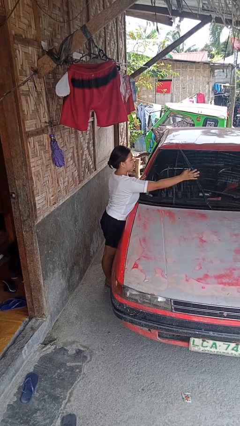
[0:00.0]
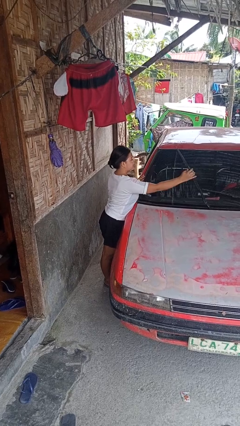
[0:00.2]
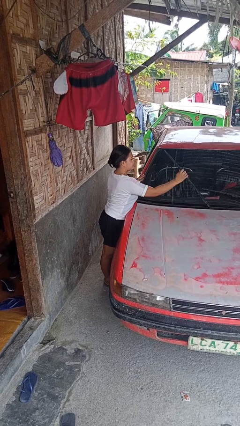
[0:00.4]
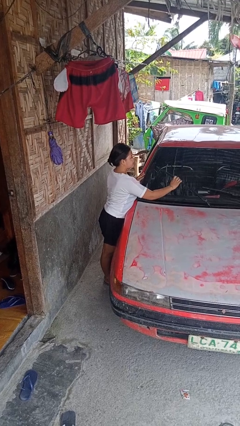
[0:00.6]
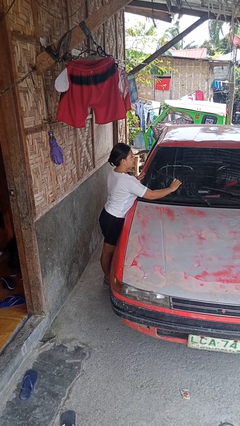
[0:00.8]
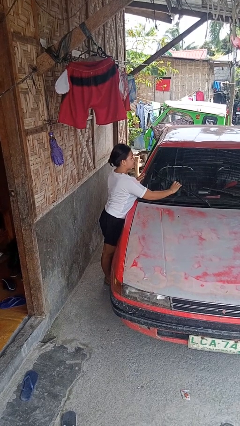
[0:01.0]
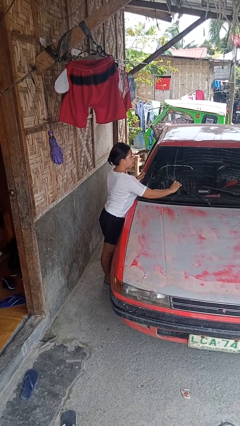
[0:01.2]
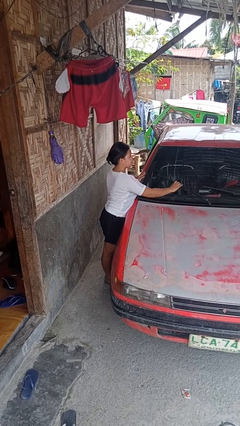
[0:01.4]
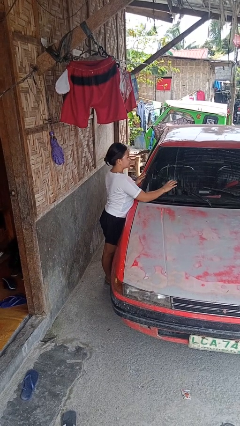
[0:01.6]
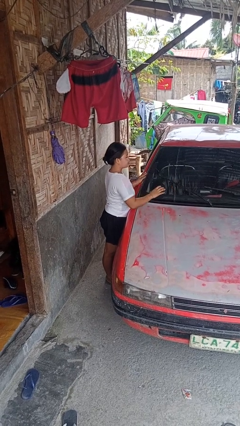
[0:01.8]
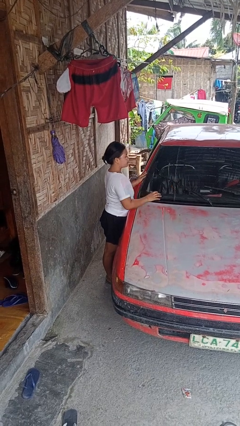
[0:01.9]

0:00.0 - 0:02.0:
person flips down car wipers

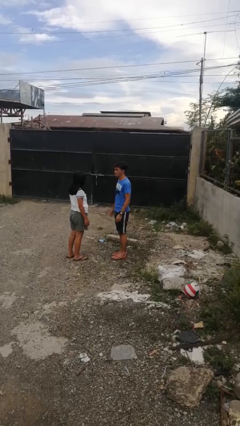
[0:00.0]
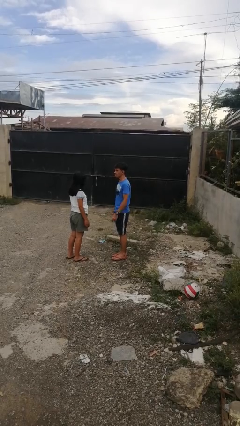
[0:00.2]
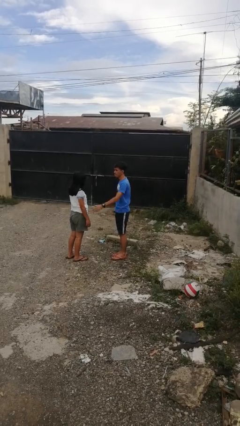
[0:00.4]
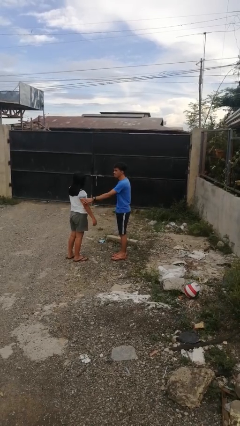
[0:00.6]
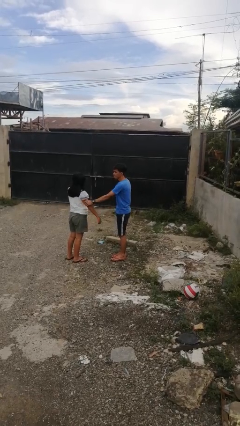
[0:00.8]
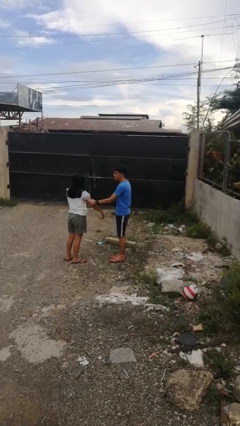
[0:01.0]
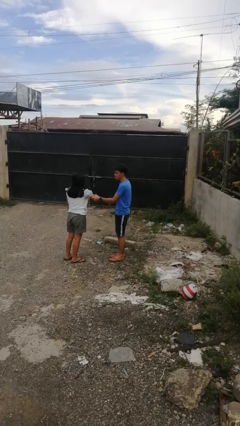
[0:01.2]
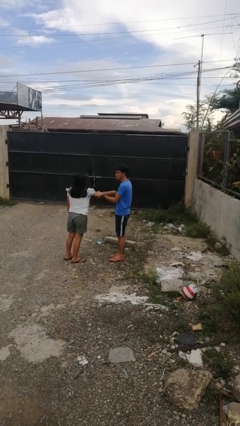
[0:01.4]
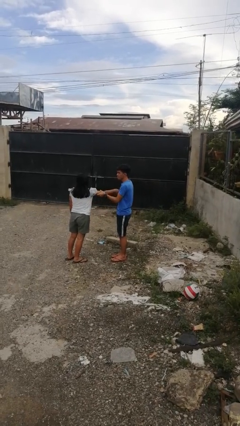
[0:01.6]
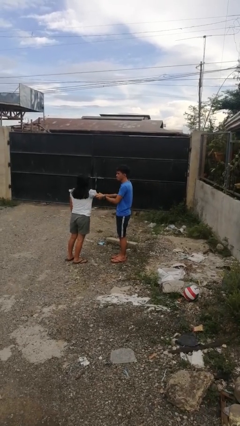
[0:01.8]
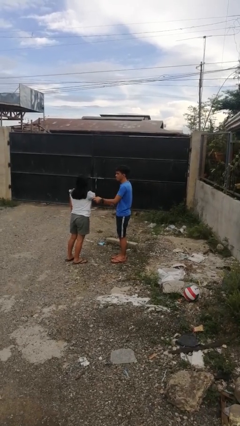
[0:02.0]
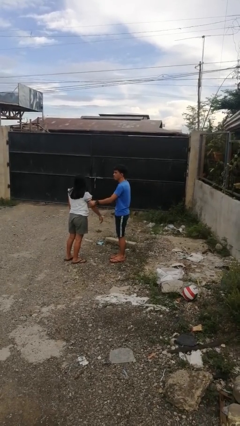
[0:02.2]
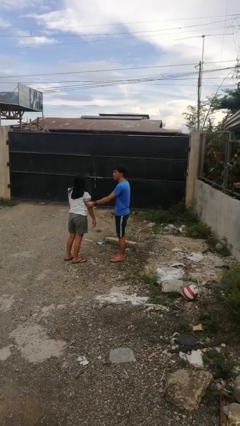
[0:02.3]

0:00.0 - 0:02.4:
person grabs person by bicep

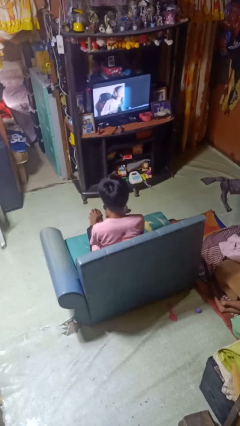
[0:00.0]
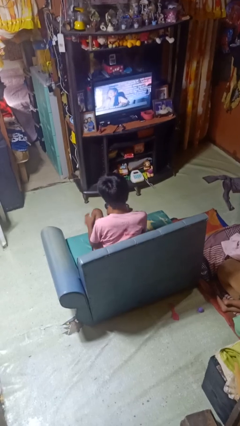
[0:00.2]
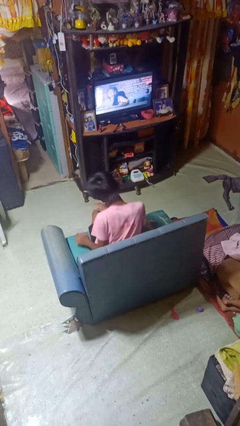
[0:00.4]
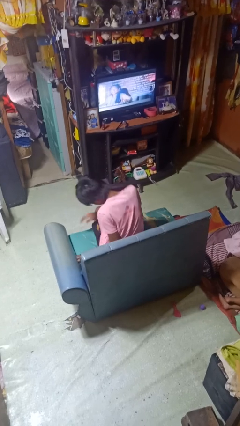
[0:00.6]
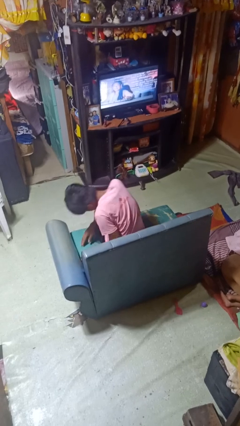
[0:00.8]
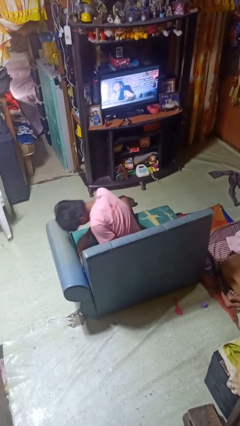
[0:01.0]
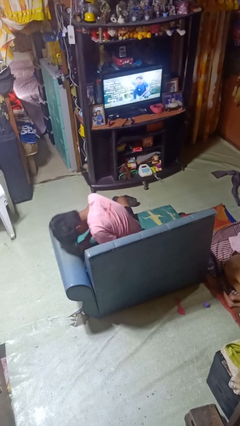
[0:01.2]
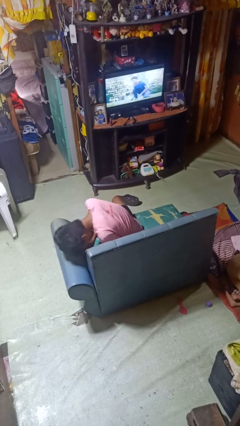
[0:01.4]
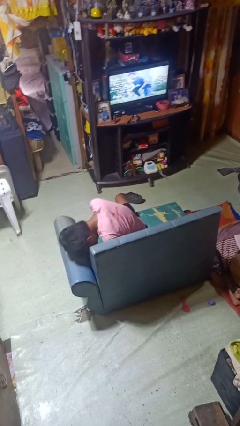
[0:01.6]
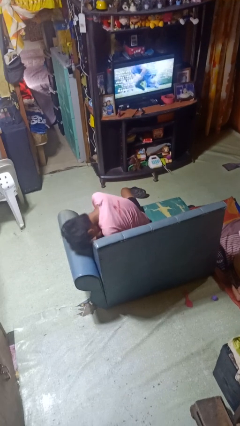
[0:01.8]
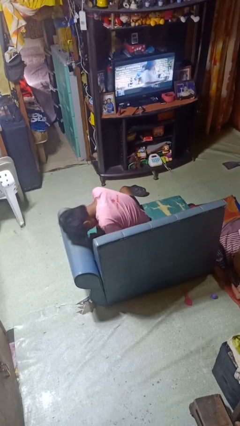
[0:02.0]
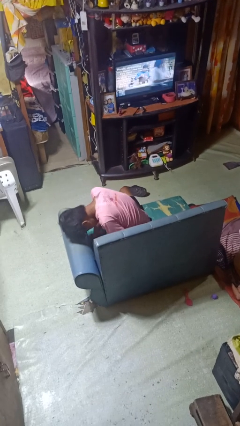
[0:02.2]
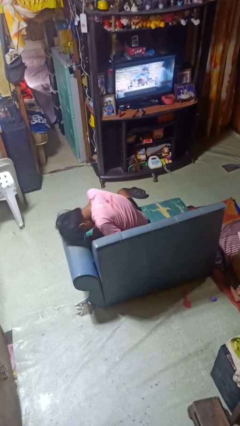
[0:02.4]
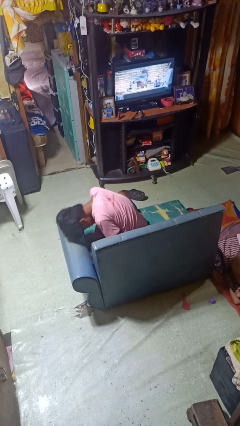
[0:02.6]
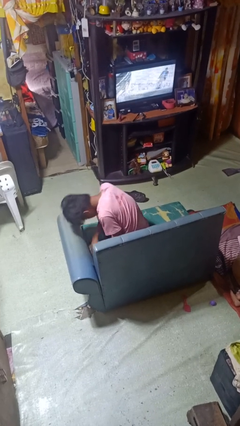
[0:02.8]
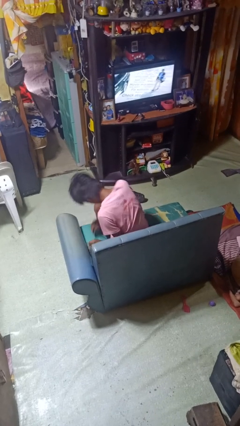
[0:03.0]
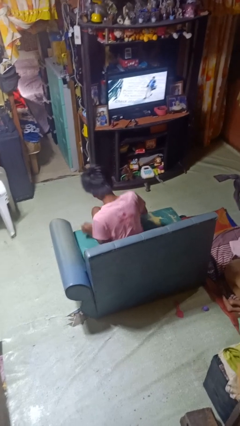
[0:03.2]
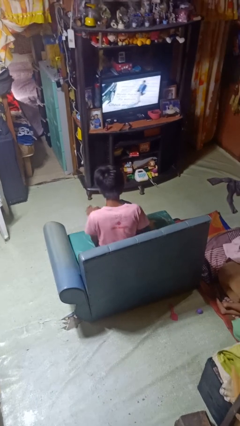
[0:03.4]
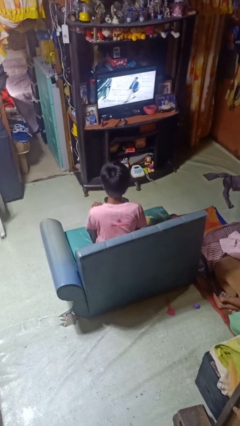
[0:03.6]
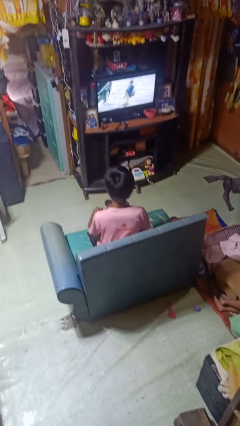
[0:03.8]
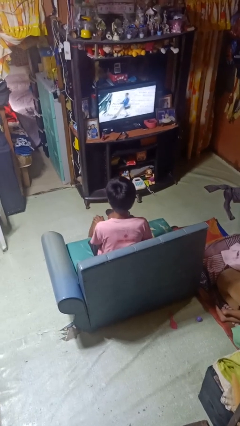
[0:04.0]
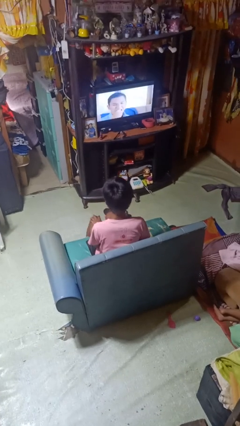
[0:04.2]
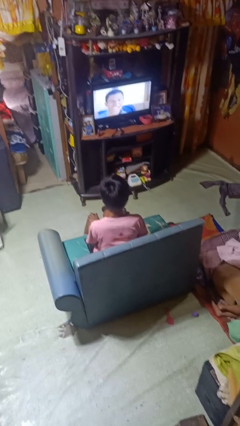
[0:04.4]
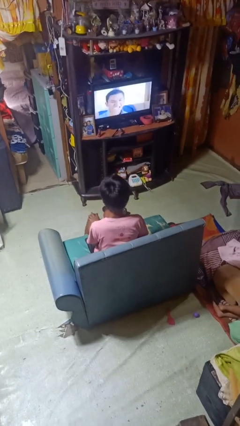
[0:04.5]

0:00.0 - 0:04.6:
person searches in couch

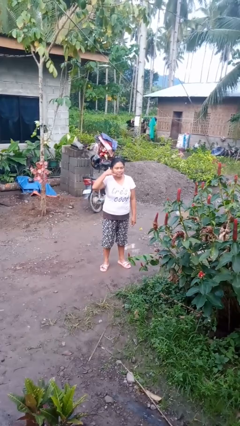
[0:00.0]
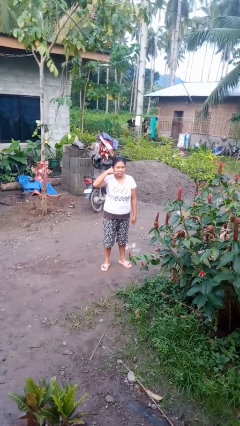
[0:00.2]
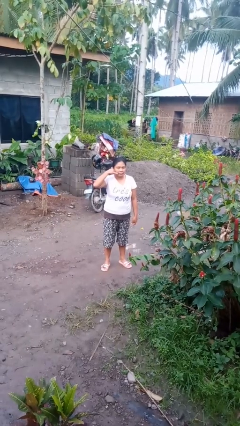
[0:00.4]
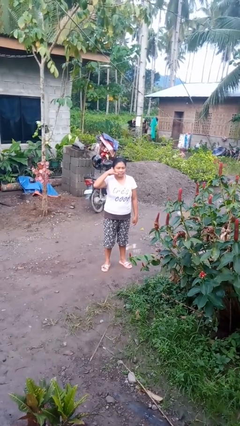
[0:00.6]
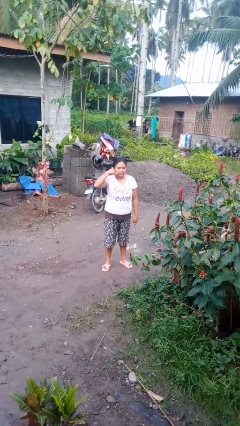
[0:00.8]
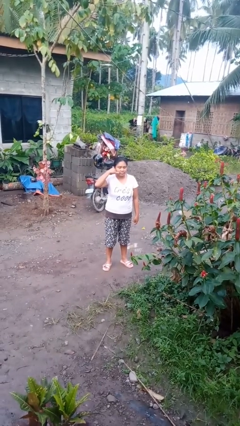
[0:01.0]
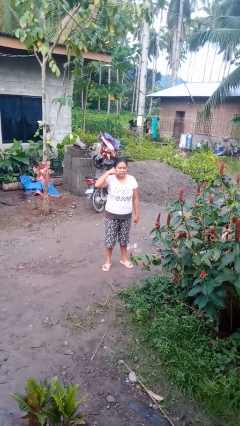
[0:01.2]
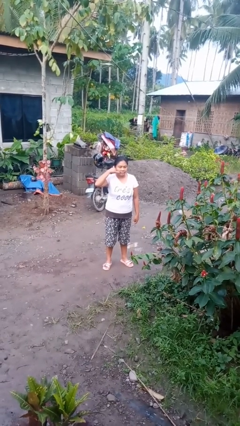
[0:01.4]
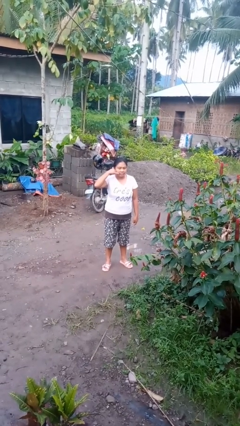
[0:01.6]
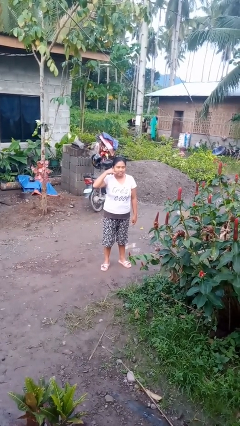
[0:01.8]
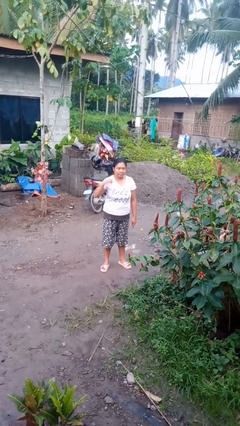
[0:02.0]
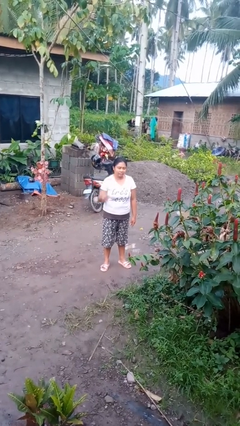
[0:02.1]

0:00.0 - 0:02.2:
person gestures call me

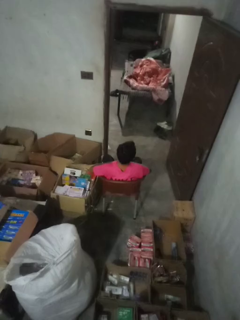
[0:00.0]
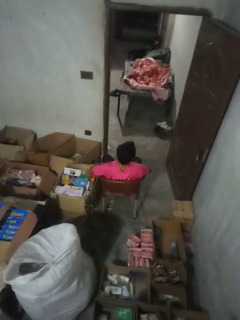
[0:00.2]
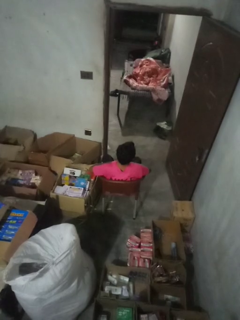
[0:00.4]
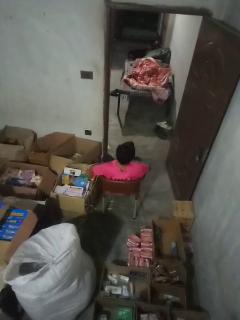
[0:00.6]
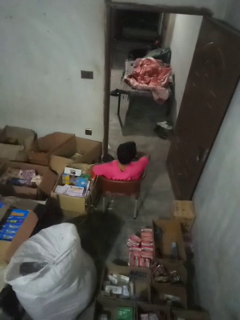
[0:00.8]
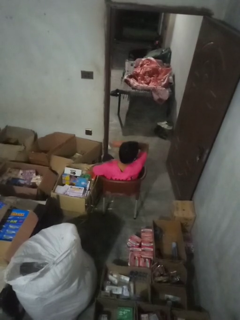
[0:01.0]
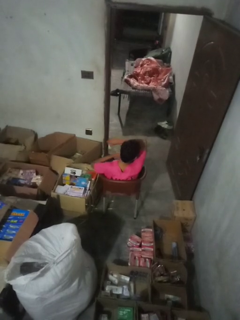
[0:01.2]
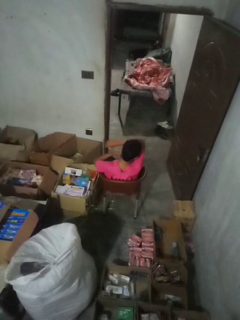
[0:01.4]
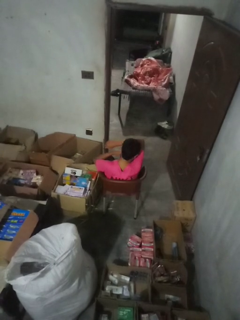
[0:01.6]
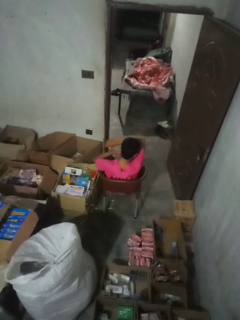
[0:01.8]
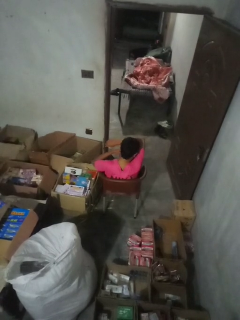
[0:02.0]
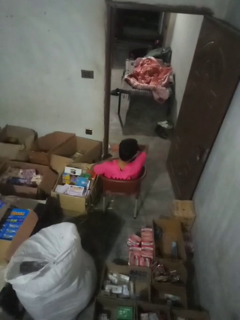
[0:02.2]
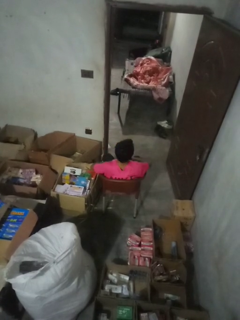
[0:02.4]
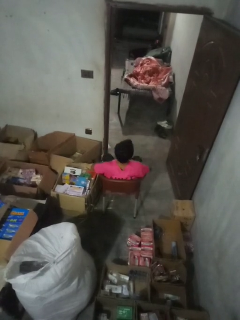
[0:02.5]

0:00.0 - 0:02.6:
person sneezes into arm

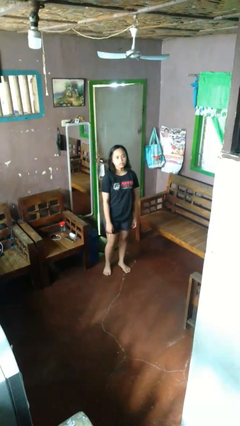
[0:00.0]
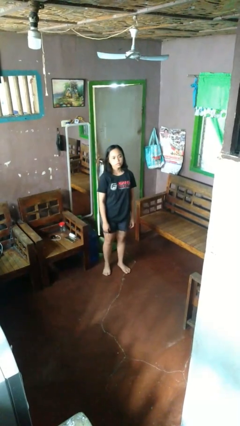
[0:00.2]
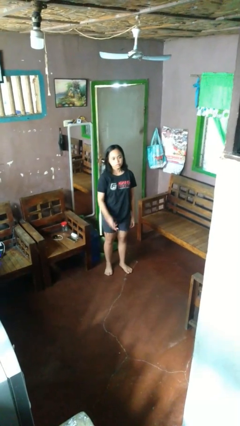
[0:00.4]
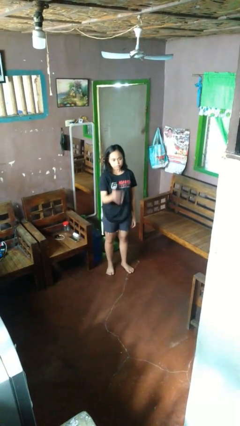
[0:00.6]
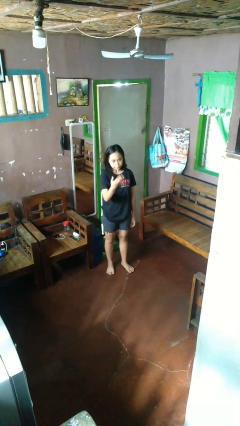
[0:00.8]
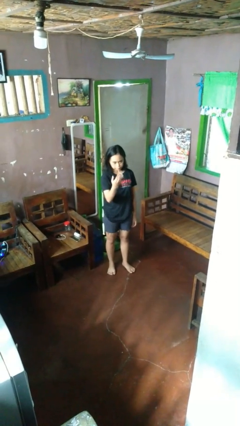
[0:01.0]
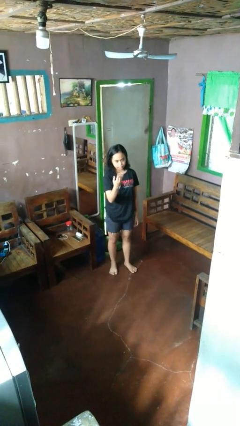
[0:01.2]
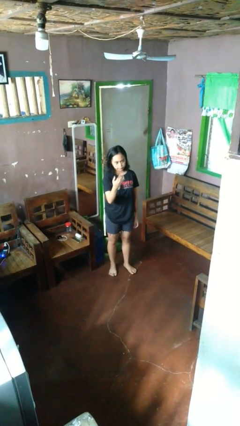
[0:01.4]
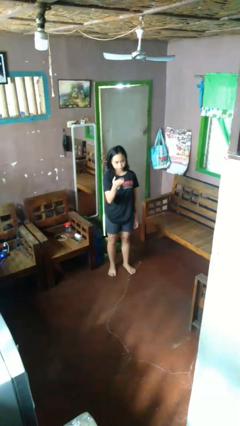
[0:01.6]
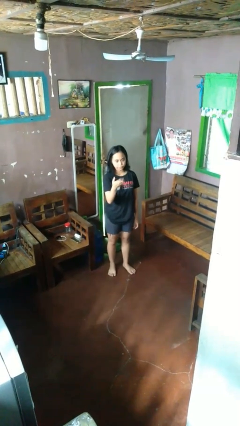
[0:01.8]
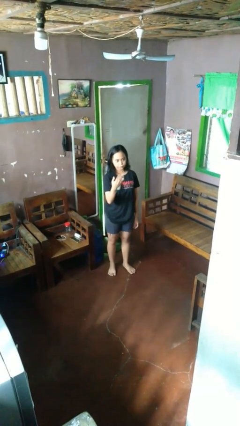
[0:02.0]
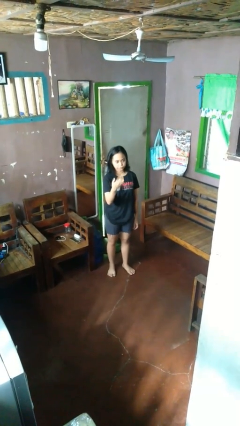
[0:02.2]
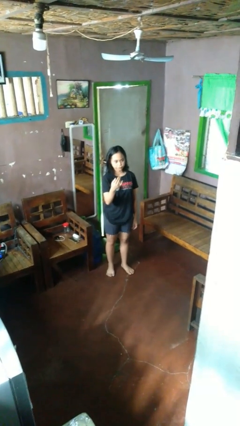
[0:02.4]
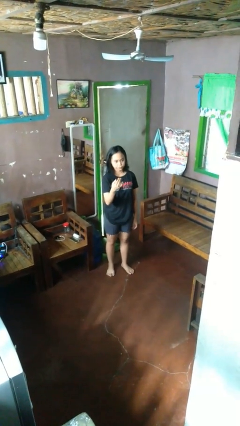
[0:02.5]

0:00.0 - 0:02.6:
person gestures come here

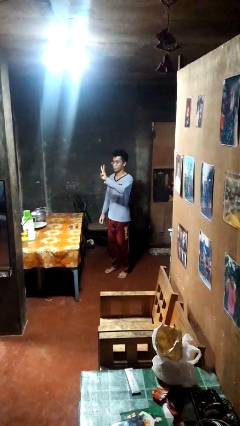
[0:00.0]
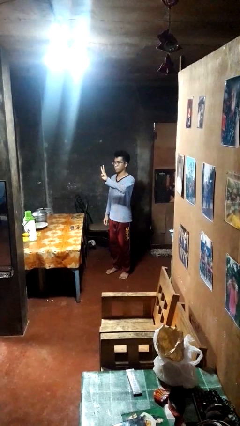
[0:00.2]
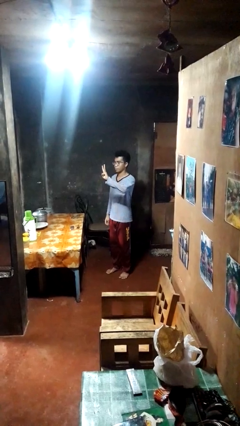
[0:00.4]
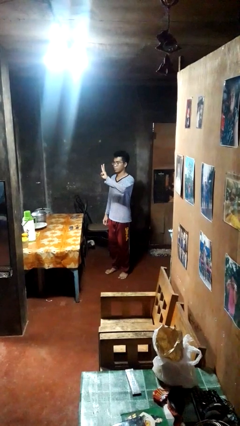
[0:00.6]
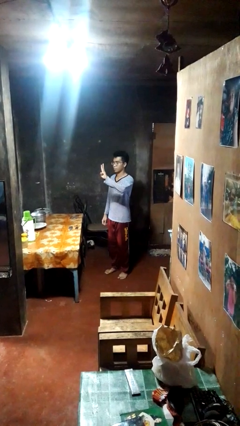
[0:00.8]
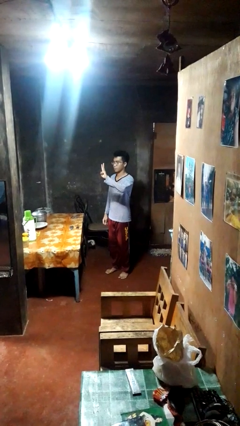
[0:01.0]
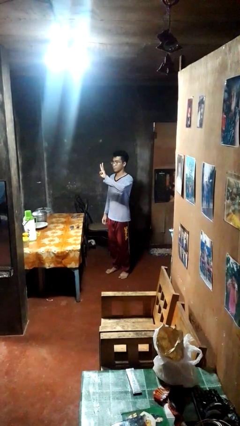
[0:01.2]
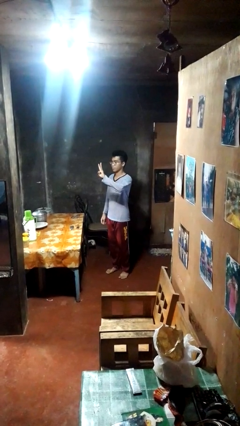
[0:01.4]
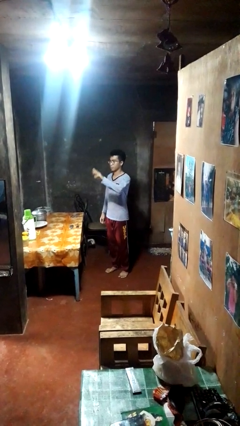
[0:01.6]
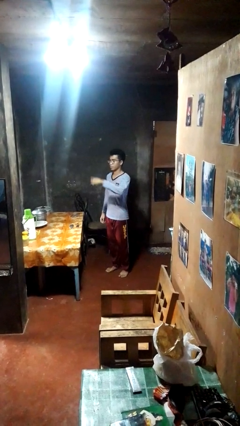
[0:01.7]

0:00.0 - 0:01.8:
person gestures number three
